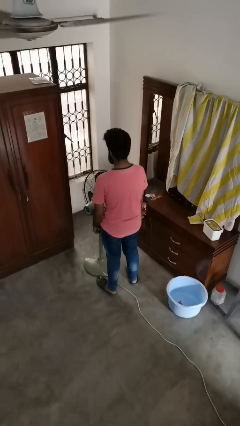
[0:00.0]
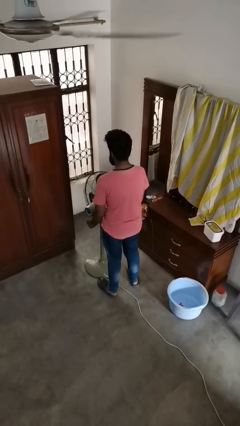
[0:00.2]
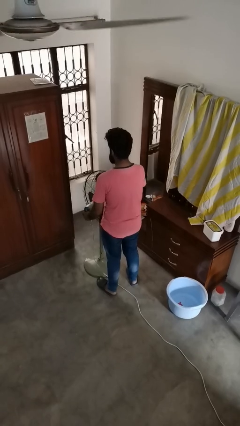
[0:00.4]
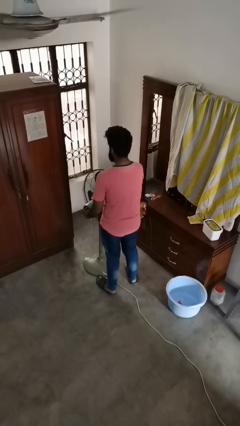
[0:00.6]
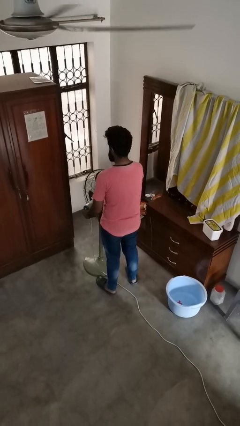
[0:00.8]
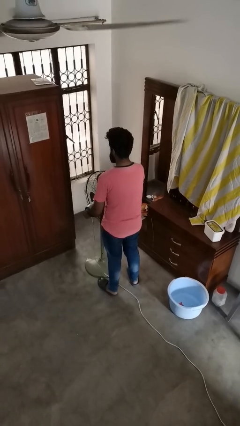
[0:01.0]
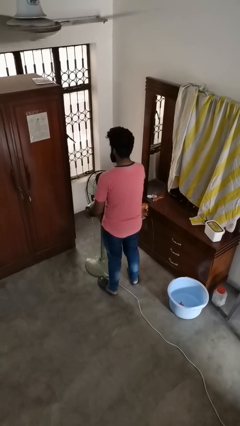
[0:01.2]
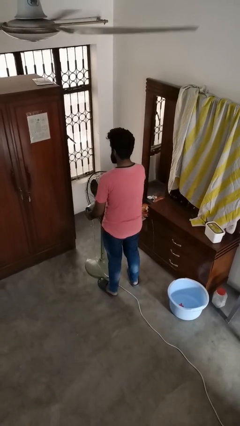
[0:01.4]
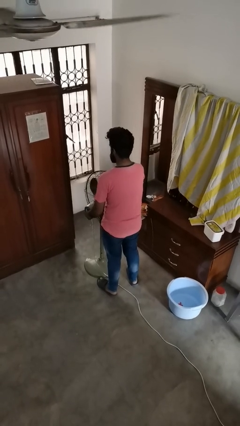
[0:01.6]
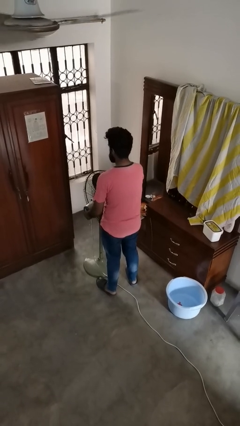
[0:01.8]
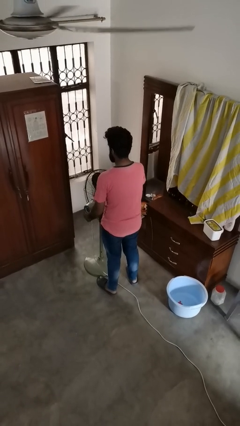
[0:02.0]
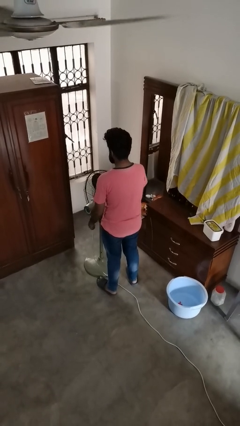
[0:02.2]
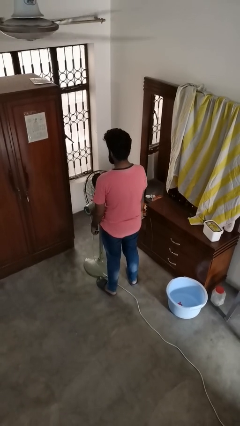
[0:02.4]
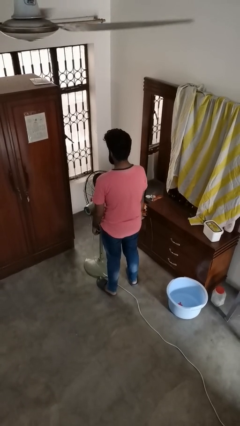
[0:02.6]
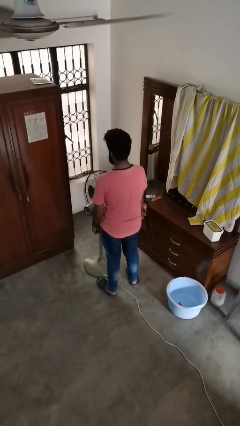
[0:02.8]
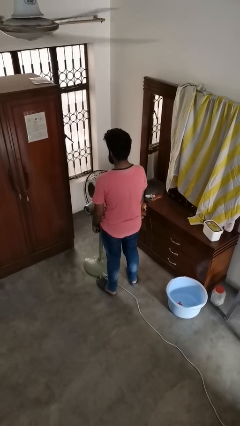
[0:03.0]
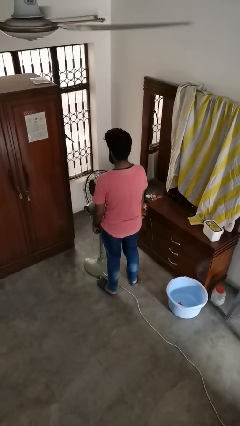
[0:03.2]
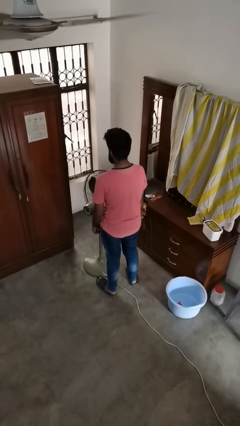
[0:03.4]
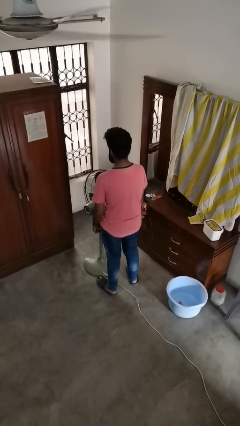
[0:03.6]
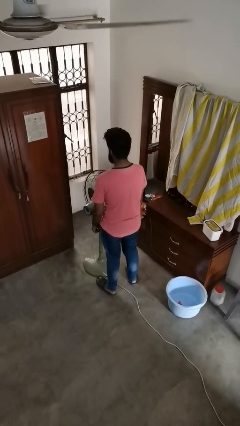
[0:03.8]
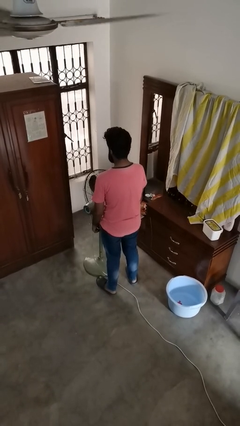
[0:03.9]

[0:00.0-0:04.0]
person turns on fan

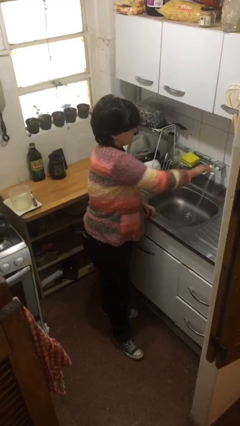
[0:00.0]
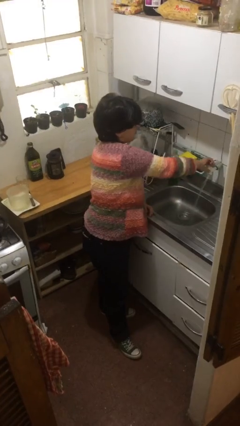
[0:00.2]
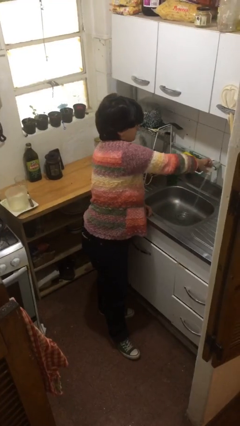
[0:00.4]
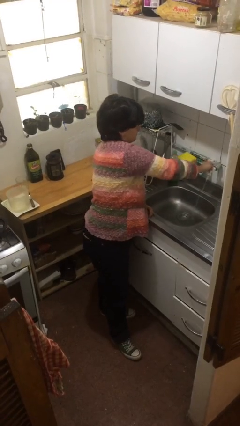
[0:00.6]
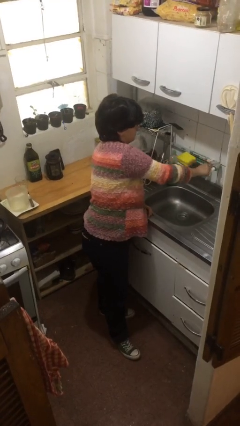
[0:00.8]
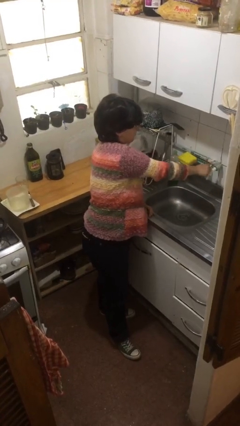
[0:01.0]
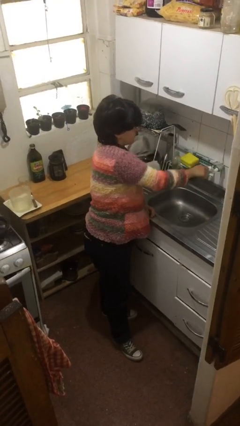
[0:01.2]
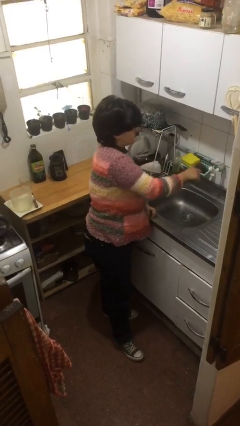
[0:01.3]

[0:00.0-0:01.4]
person turns off faucet

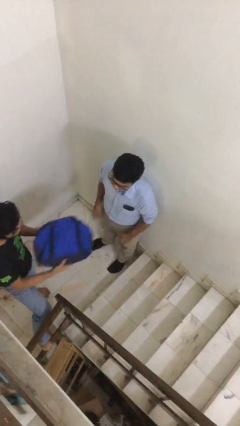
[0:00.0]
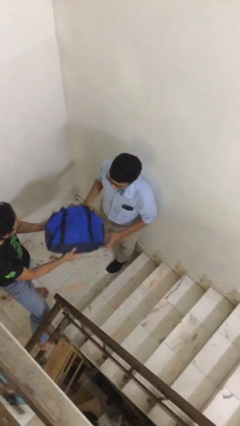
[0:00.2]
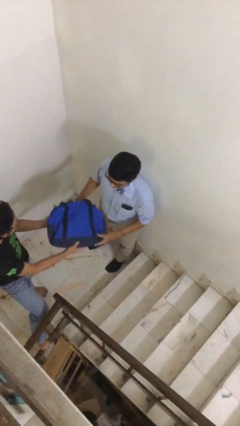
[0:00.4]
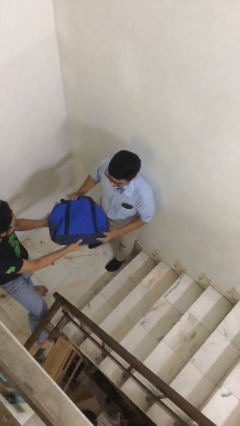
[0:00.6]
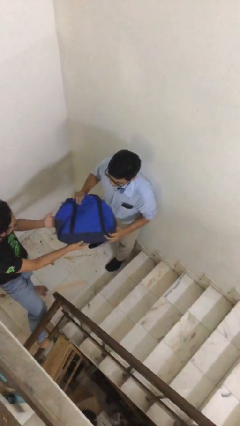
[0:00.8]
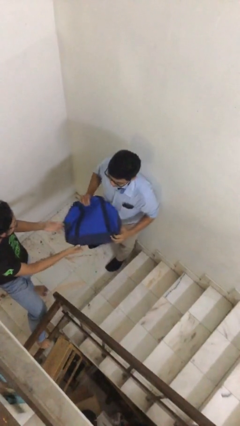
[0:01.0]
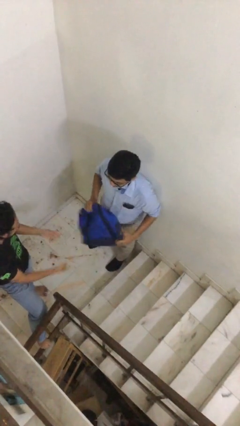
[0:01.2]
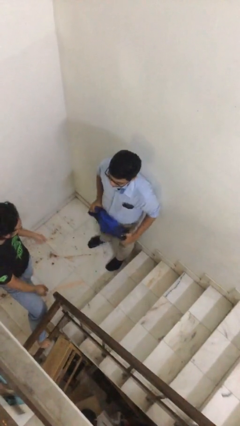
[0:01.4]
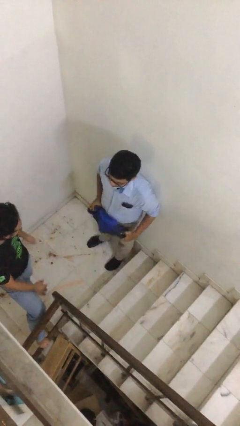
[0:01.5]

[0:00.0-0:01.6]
person transfers object to person

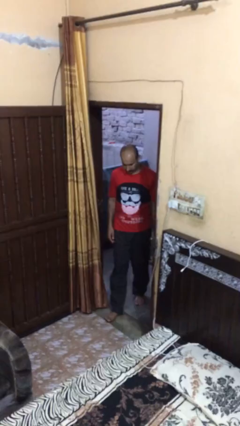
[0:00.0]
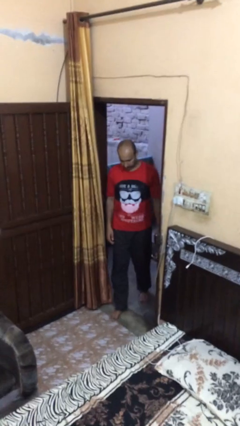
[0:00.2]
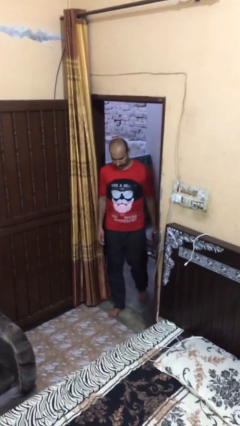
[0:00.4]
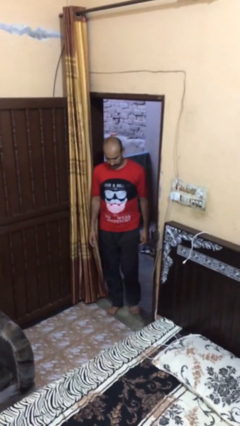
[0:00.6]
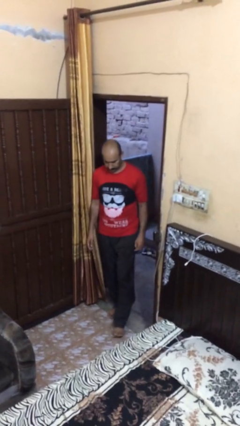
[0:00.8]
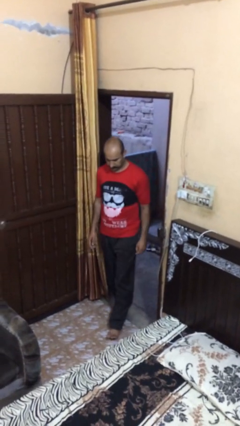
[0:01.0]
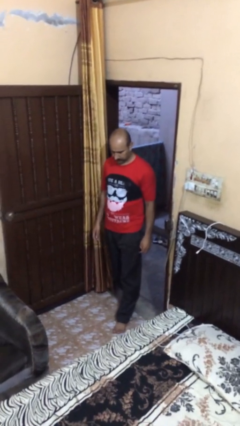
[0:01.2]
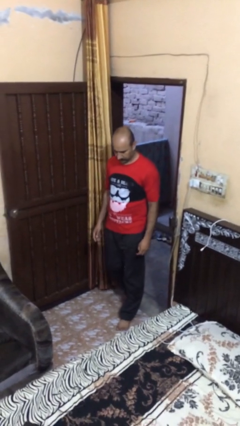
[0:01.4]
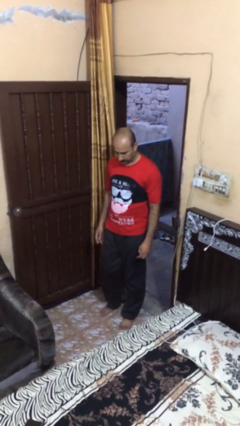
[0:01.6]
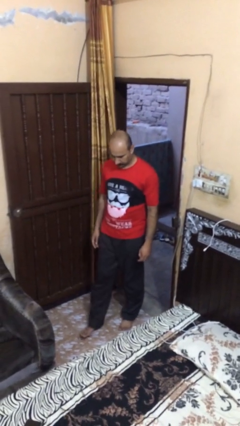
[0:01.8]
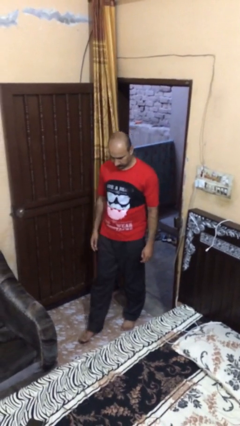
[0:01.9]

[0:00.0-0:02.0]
person enters scene through structure

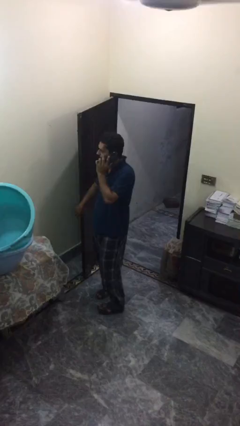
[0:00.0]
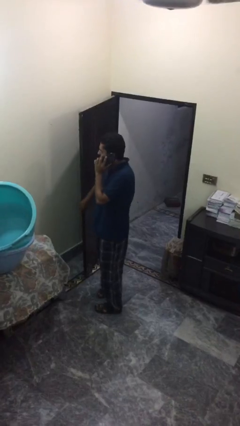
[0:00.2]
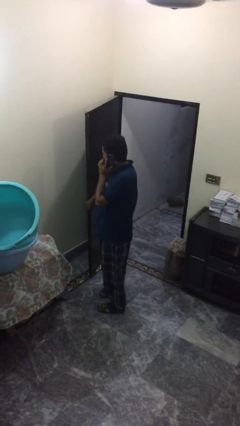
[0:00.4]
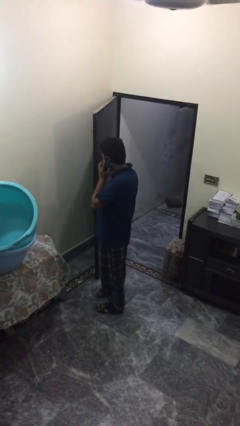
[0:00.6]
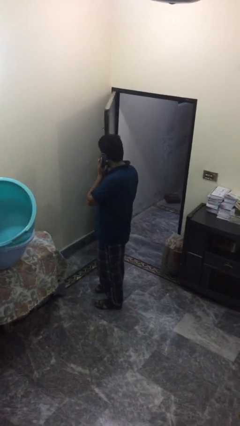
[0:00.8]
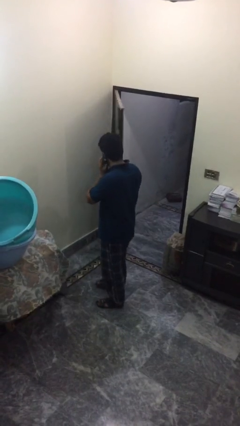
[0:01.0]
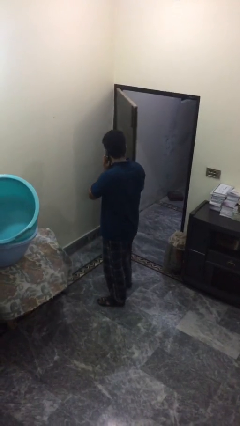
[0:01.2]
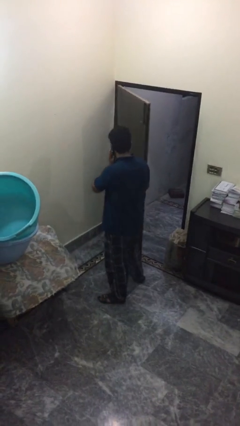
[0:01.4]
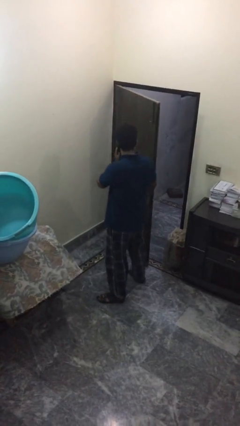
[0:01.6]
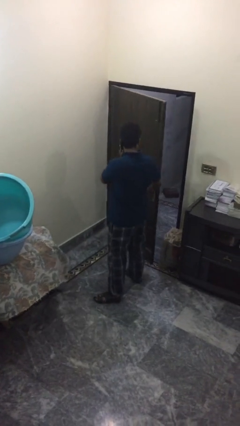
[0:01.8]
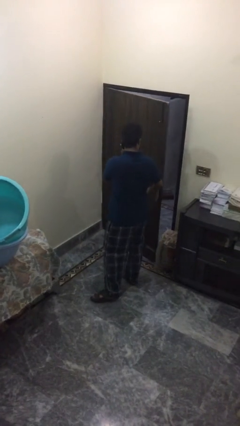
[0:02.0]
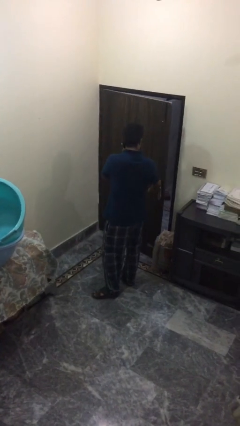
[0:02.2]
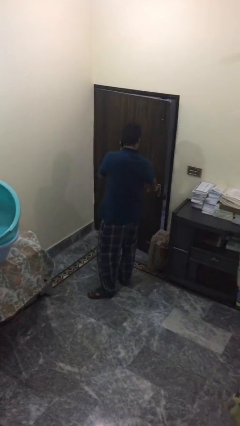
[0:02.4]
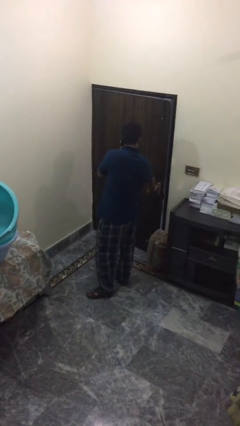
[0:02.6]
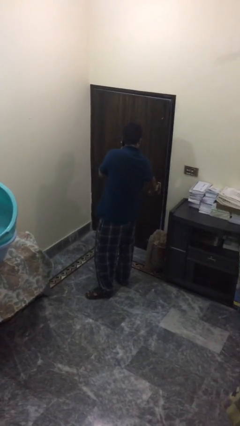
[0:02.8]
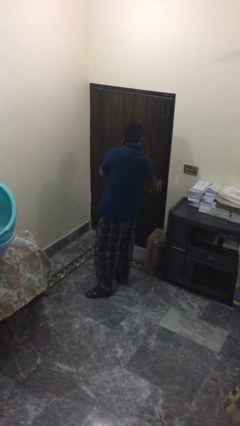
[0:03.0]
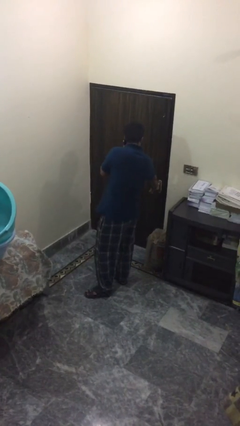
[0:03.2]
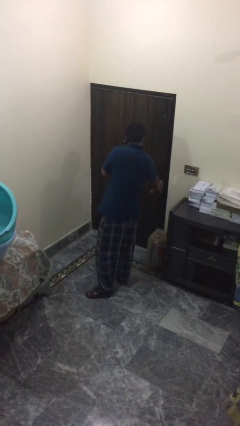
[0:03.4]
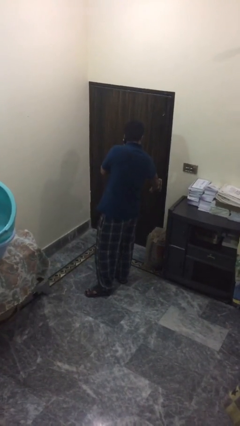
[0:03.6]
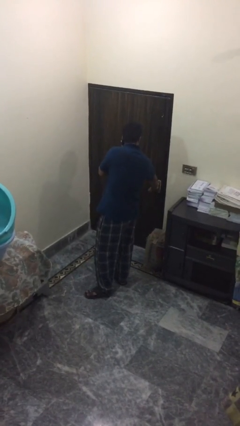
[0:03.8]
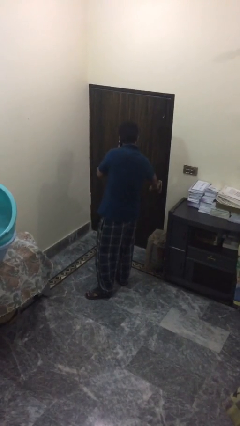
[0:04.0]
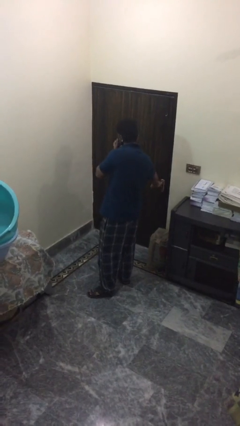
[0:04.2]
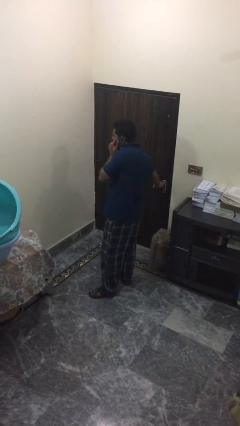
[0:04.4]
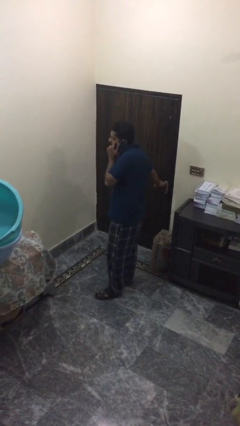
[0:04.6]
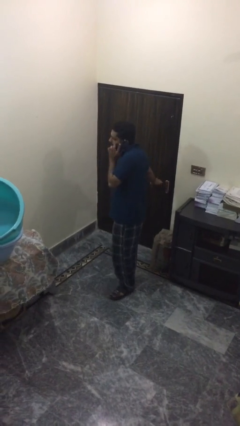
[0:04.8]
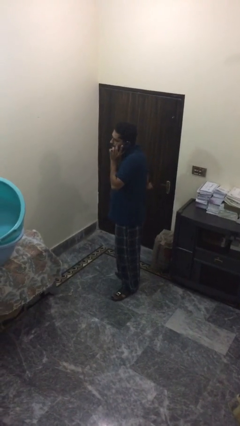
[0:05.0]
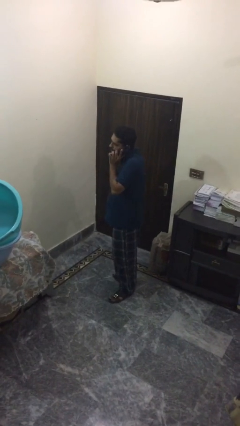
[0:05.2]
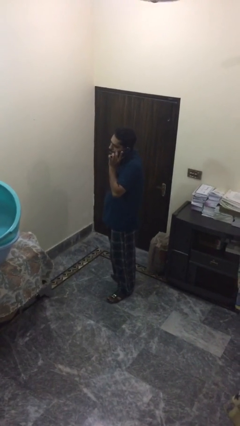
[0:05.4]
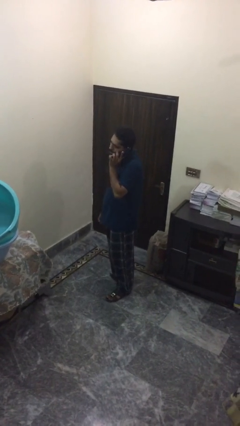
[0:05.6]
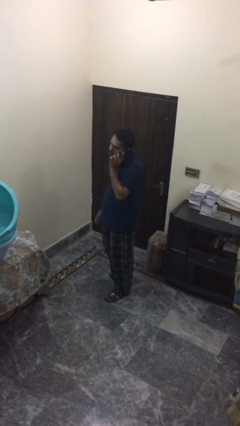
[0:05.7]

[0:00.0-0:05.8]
person closes facility door

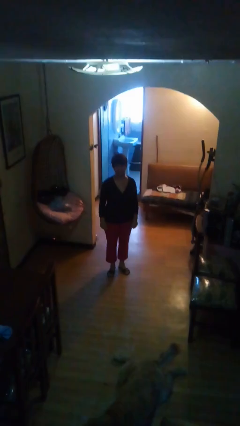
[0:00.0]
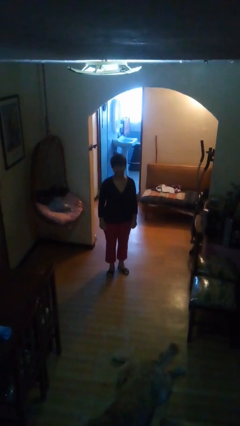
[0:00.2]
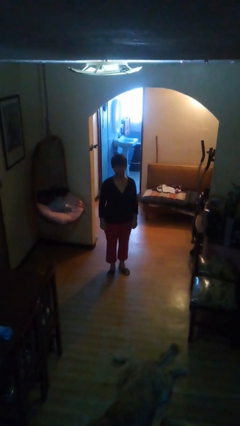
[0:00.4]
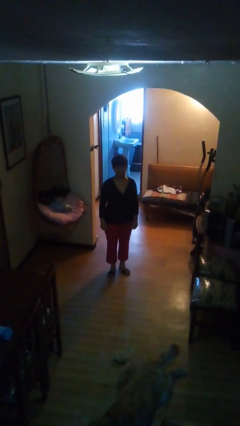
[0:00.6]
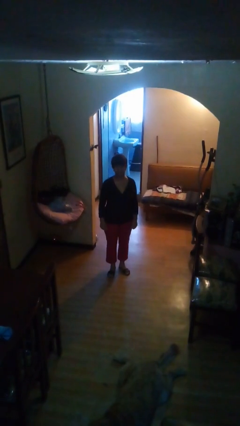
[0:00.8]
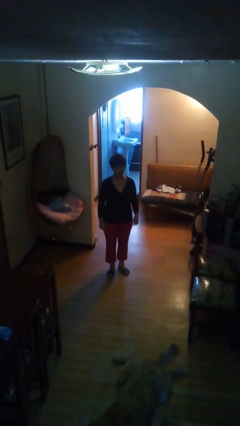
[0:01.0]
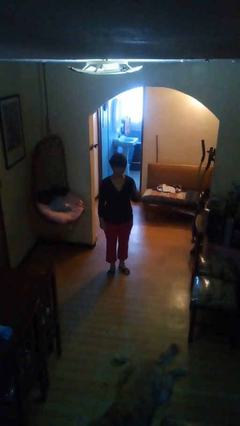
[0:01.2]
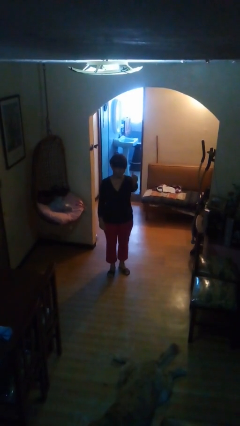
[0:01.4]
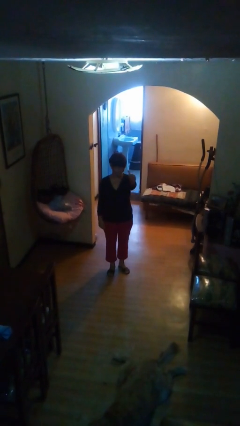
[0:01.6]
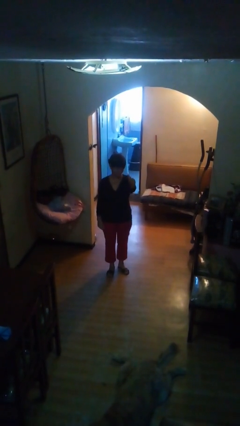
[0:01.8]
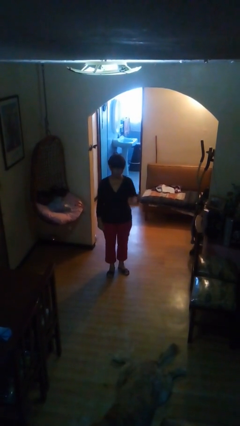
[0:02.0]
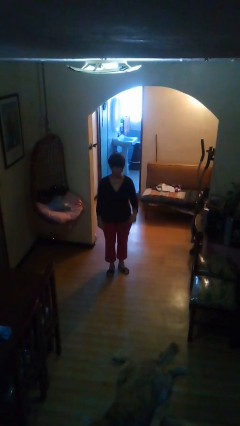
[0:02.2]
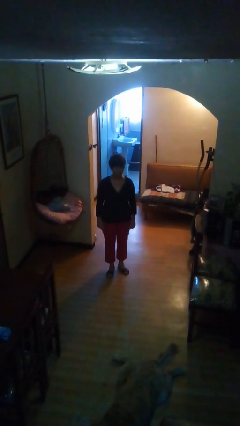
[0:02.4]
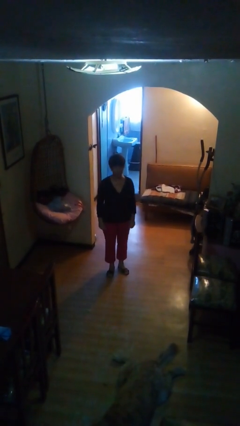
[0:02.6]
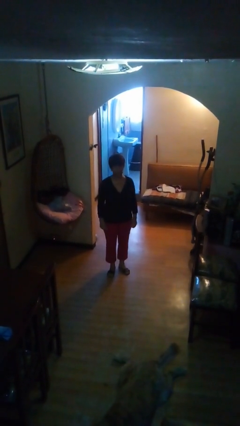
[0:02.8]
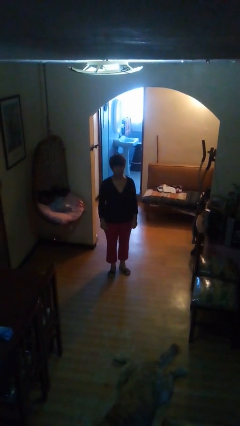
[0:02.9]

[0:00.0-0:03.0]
person gestures thumbs up
